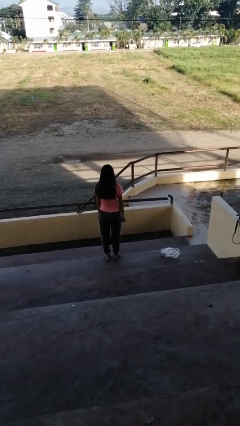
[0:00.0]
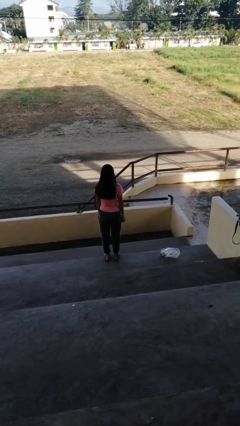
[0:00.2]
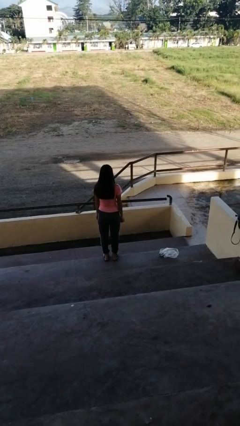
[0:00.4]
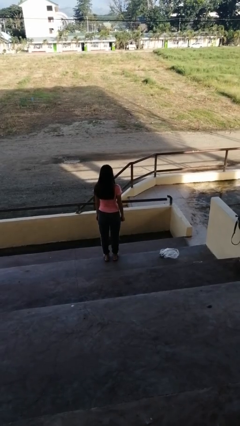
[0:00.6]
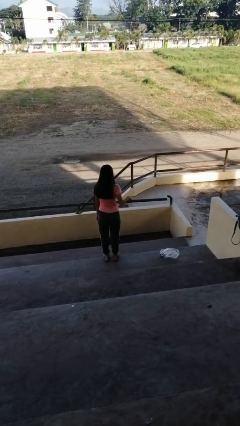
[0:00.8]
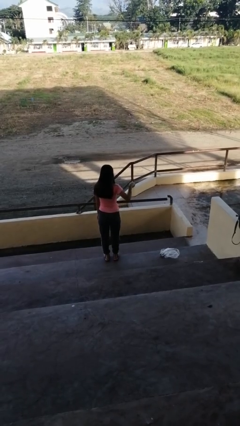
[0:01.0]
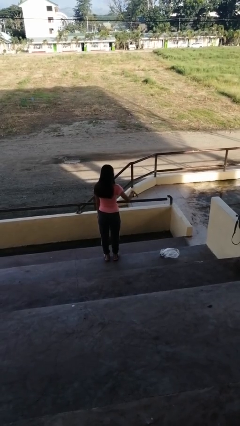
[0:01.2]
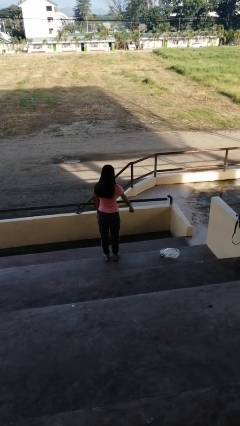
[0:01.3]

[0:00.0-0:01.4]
person drops object

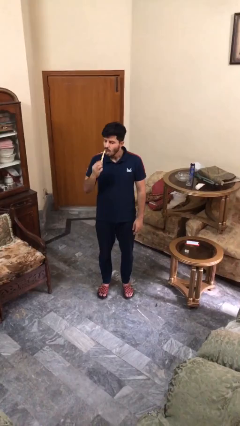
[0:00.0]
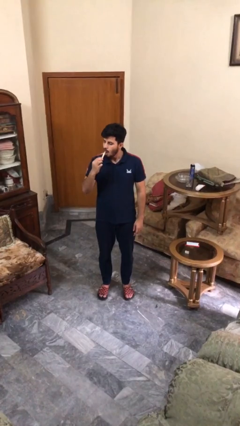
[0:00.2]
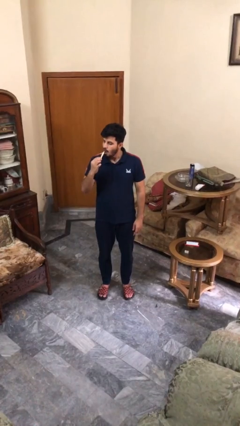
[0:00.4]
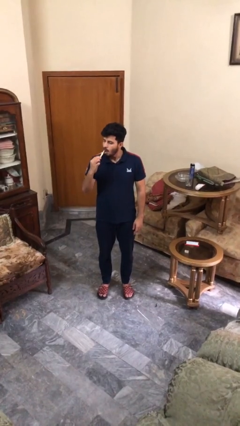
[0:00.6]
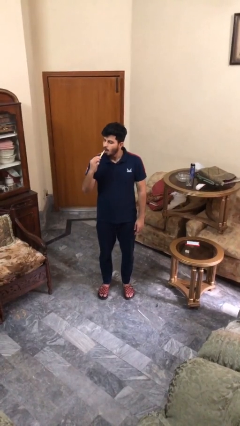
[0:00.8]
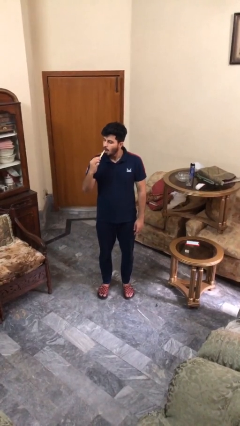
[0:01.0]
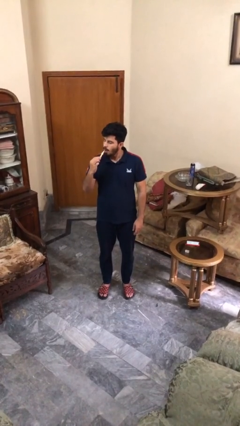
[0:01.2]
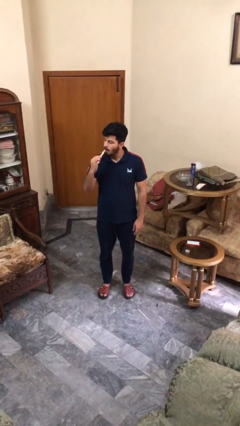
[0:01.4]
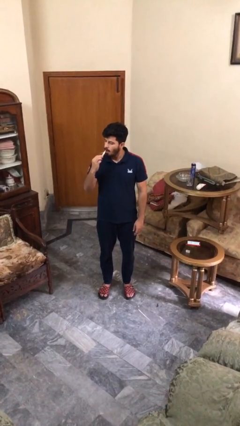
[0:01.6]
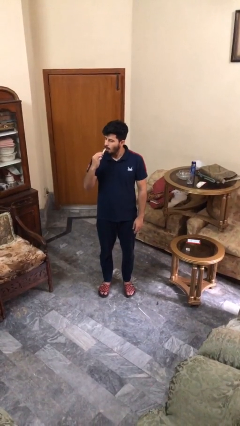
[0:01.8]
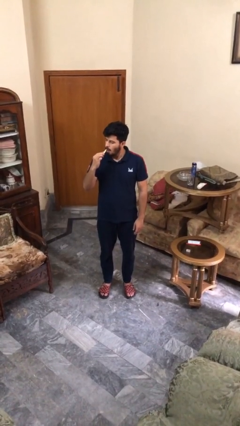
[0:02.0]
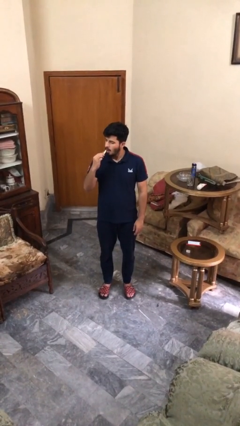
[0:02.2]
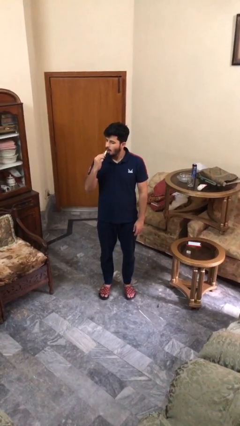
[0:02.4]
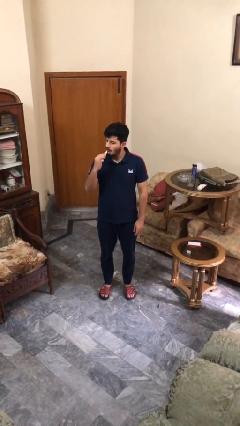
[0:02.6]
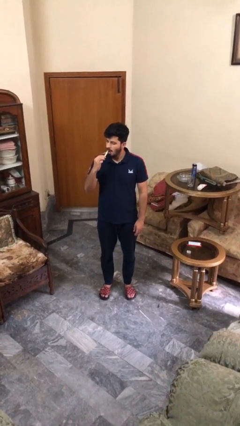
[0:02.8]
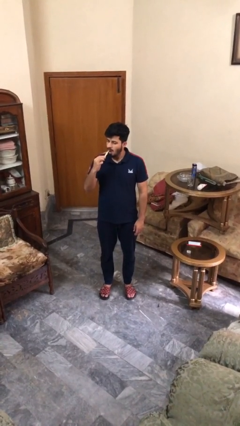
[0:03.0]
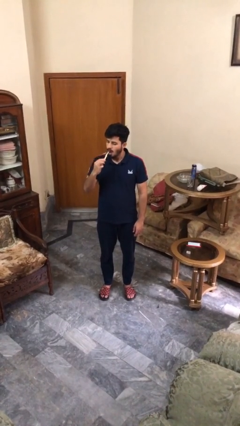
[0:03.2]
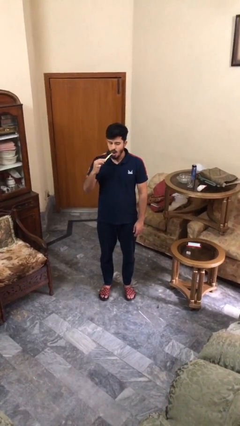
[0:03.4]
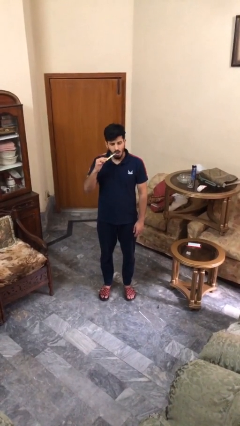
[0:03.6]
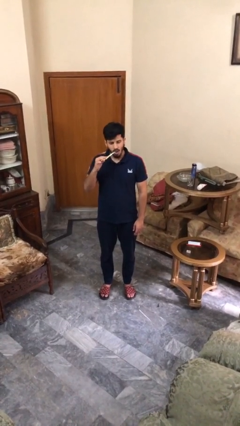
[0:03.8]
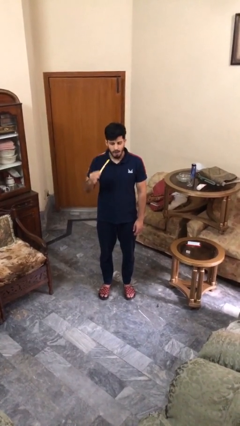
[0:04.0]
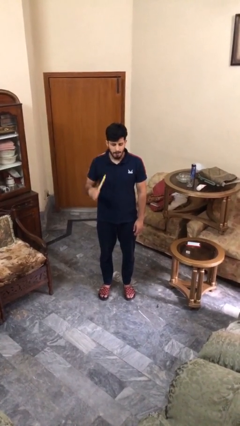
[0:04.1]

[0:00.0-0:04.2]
person brushes teeth

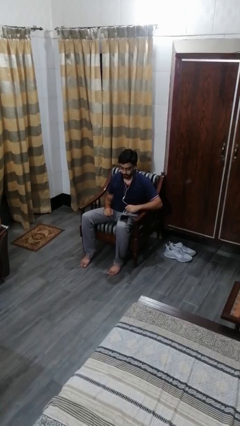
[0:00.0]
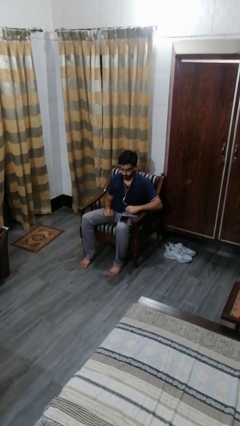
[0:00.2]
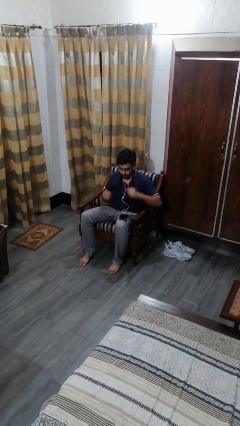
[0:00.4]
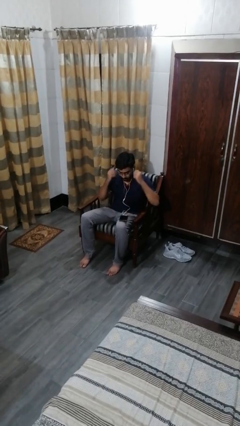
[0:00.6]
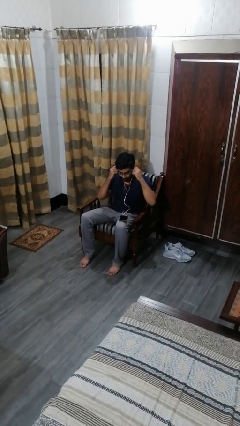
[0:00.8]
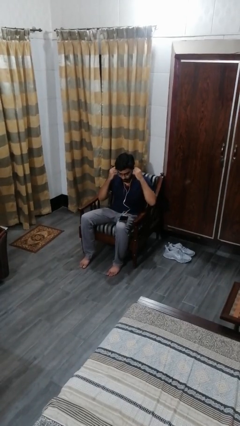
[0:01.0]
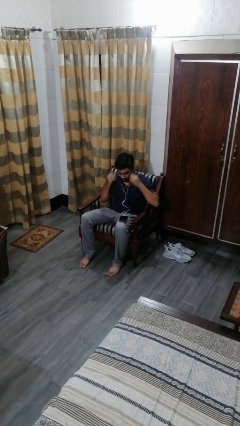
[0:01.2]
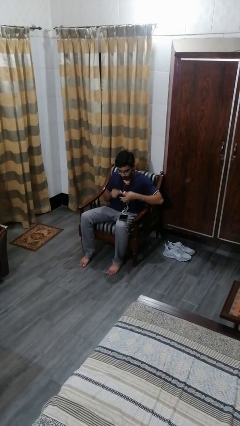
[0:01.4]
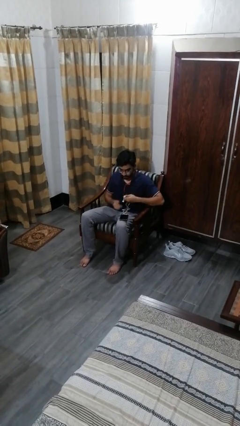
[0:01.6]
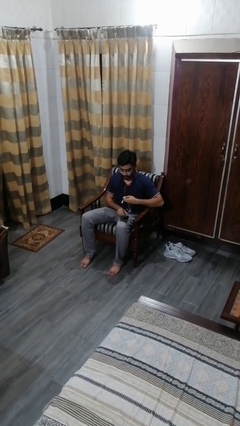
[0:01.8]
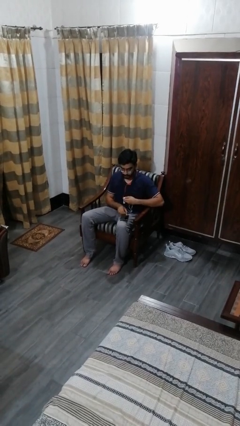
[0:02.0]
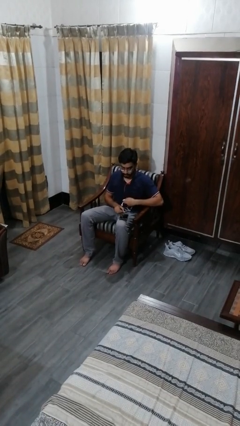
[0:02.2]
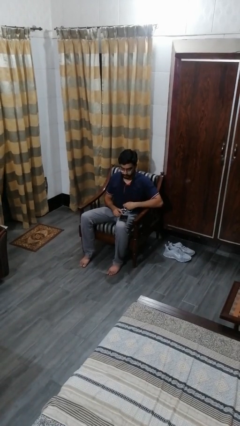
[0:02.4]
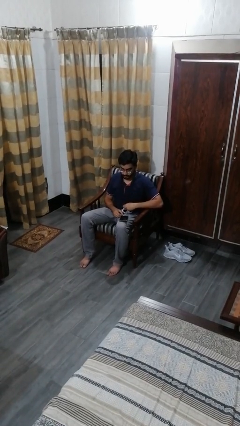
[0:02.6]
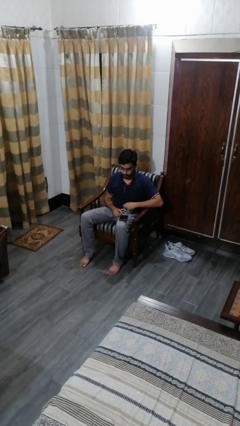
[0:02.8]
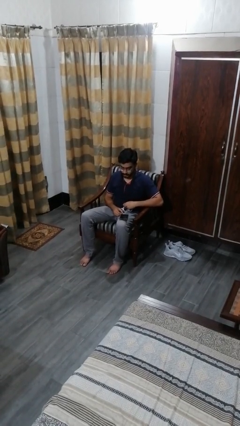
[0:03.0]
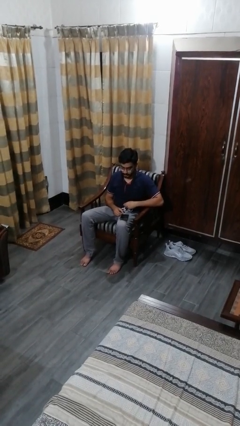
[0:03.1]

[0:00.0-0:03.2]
person takes off headphones

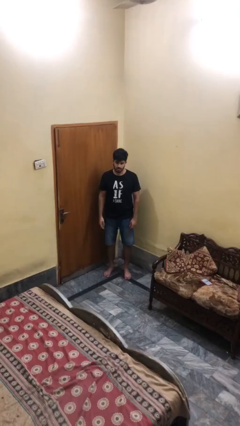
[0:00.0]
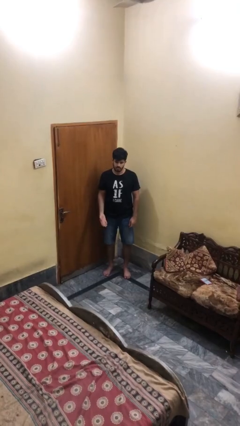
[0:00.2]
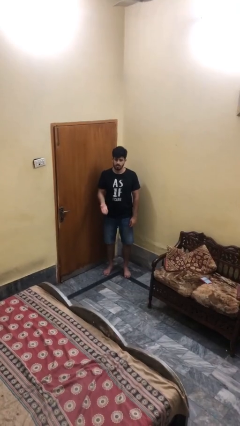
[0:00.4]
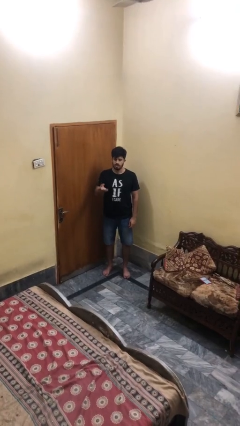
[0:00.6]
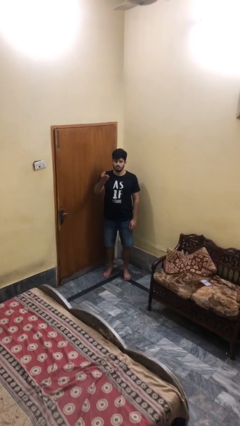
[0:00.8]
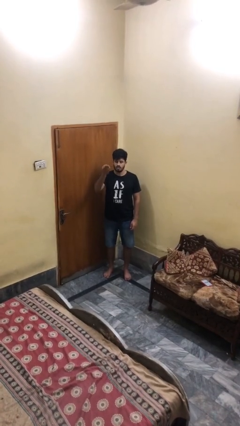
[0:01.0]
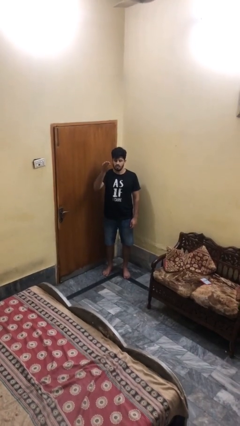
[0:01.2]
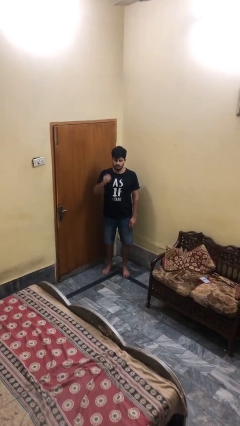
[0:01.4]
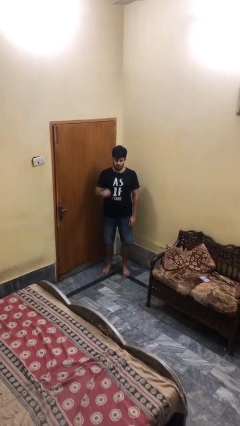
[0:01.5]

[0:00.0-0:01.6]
person gestures swipe up

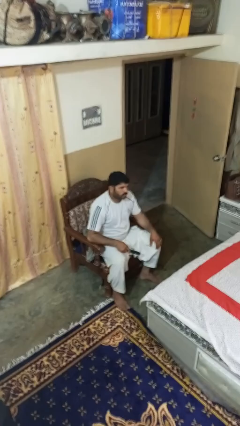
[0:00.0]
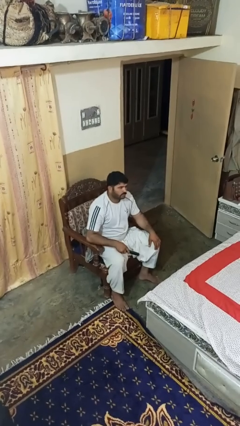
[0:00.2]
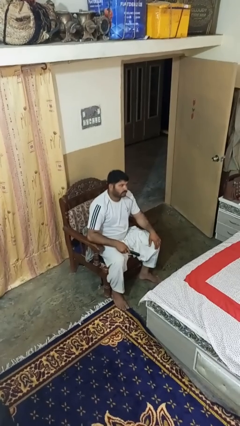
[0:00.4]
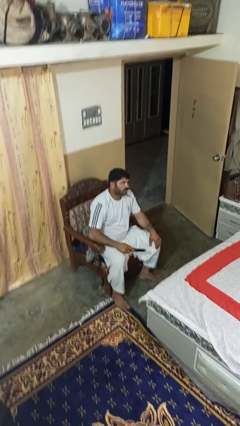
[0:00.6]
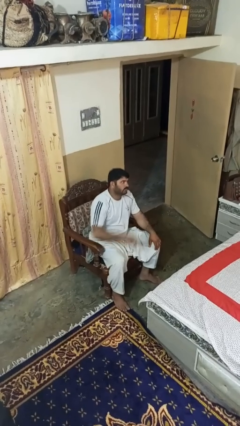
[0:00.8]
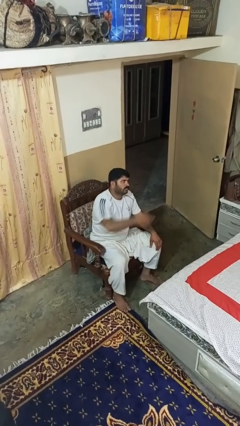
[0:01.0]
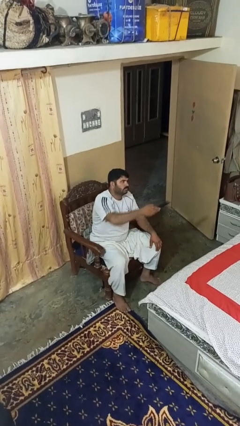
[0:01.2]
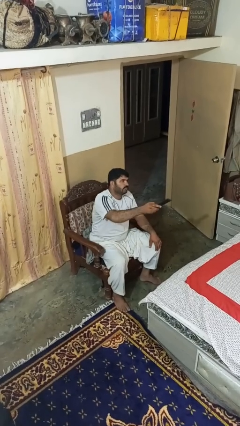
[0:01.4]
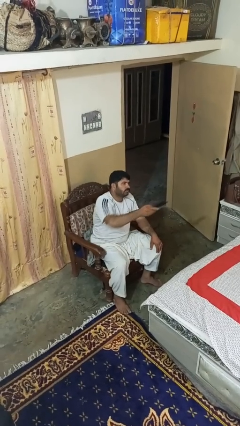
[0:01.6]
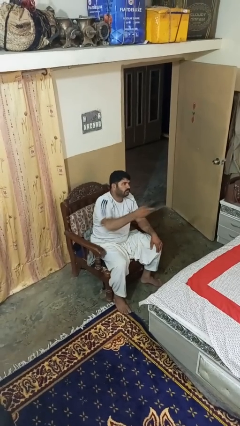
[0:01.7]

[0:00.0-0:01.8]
person uses television remote

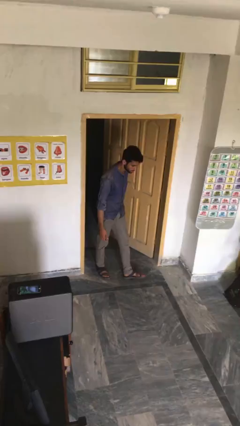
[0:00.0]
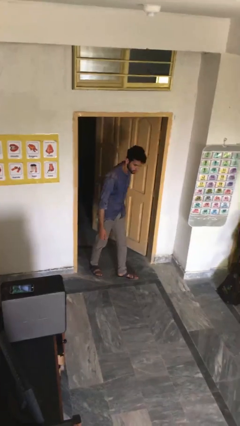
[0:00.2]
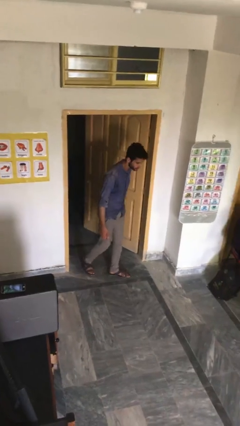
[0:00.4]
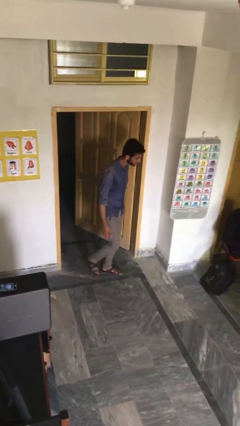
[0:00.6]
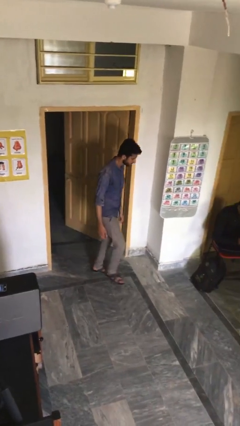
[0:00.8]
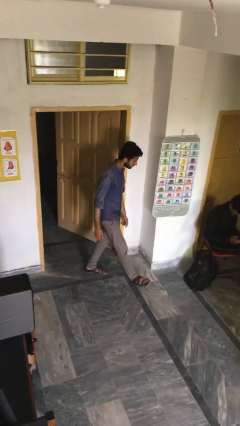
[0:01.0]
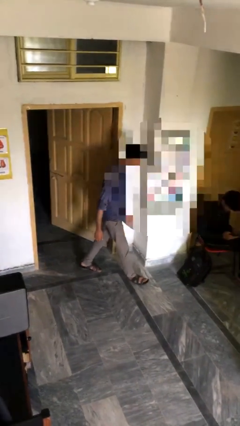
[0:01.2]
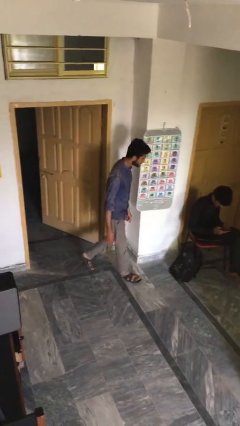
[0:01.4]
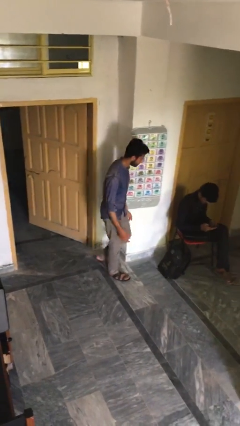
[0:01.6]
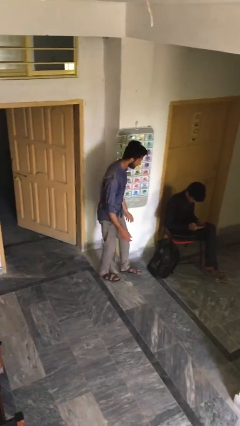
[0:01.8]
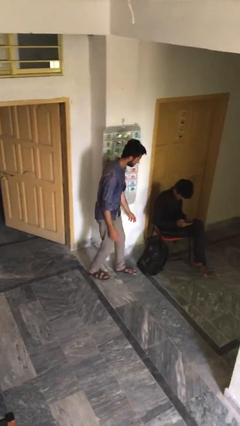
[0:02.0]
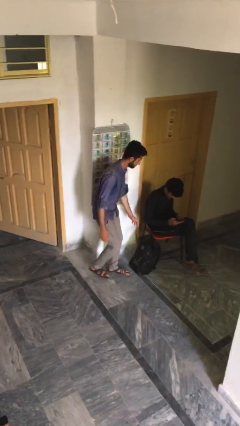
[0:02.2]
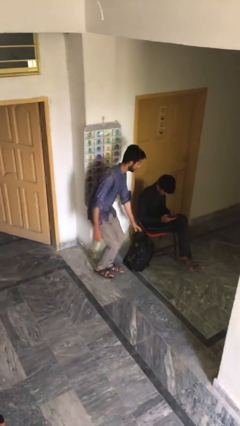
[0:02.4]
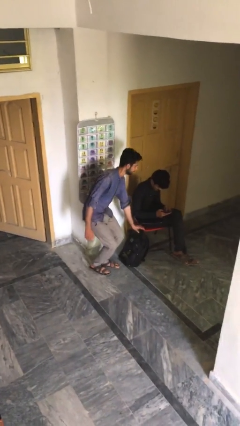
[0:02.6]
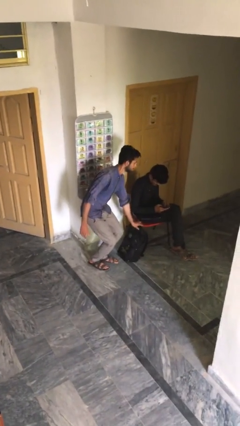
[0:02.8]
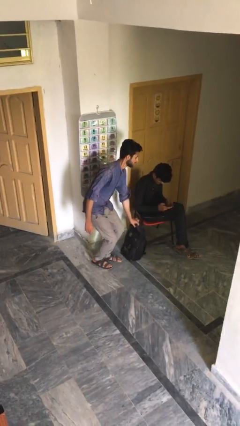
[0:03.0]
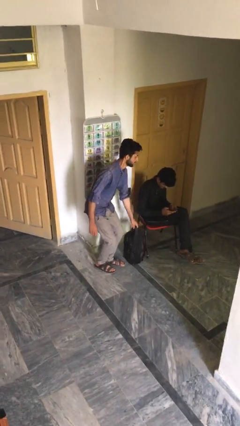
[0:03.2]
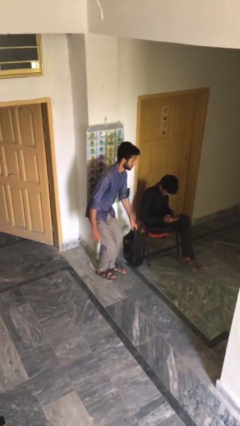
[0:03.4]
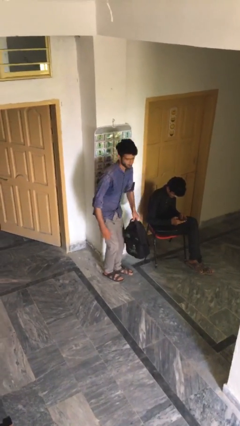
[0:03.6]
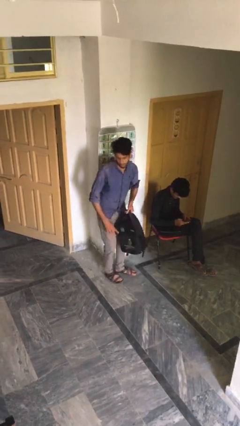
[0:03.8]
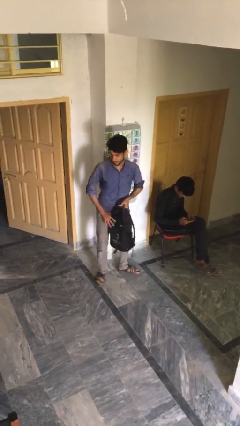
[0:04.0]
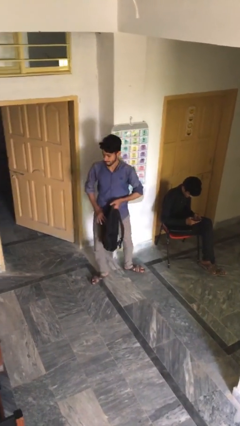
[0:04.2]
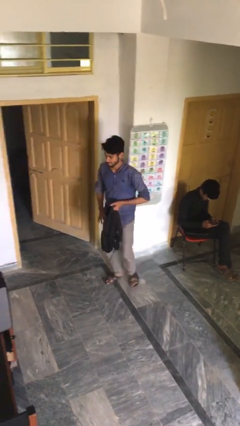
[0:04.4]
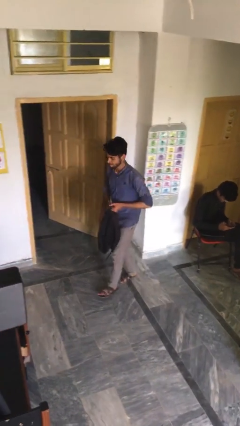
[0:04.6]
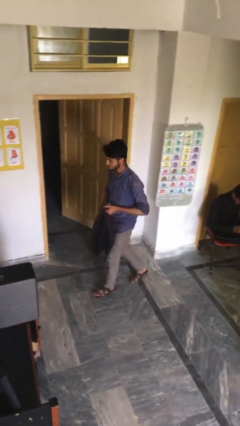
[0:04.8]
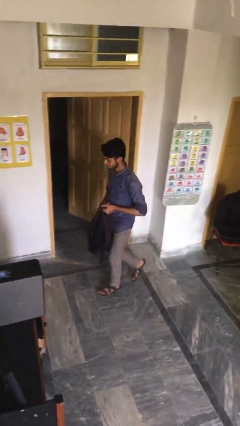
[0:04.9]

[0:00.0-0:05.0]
person steals object from person

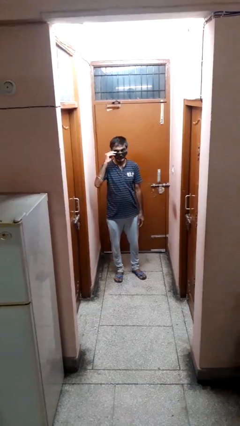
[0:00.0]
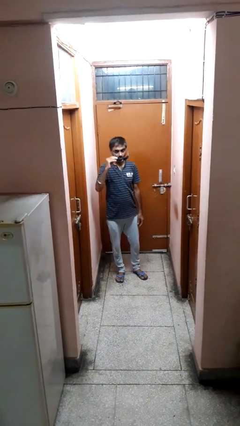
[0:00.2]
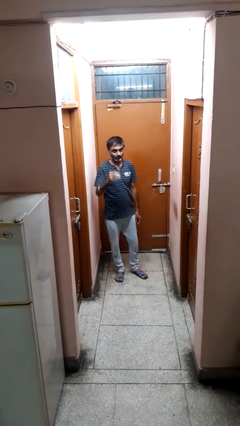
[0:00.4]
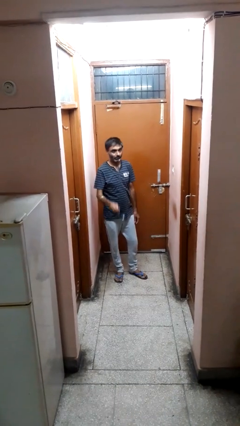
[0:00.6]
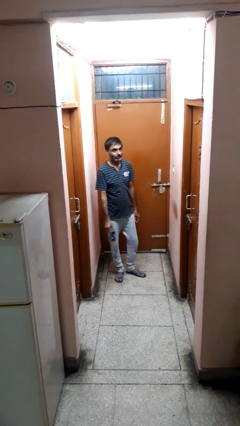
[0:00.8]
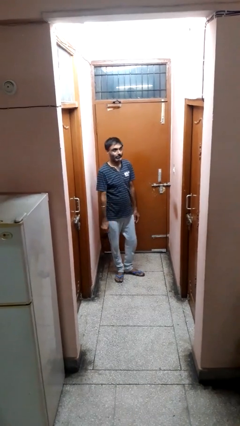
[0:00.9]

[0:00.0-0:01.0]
person takes off sunglasses
